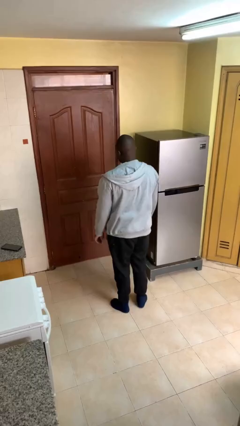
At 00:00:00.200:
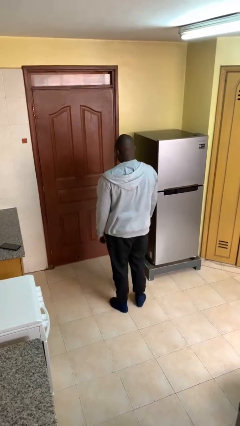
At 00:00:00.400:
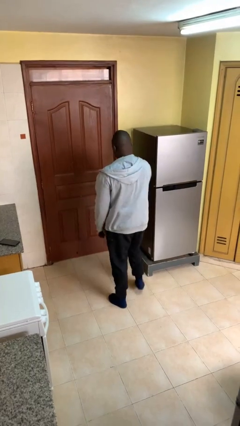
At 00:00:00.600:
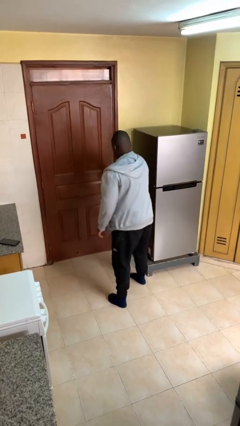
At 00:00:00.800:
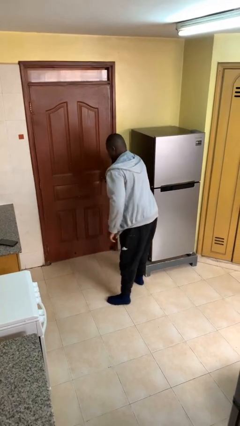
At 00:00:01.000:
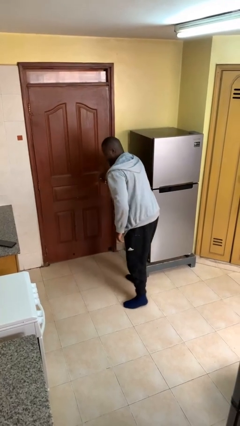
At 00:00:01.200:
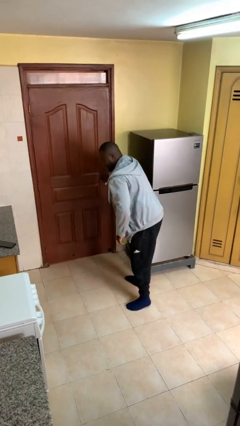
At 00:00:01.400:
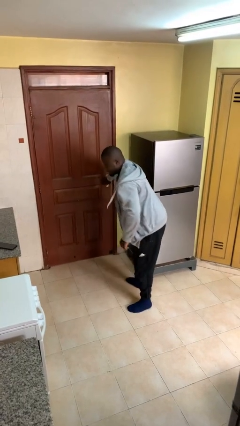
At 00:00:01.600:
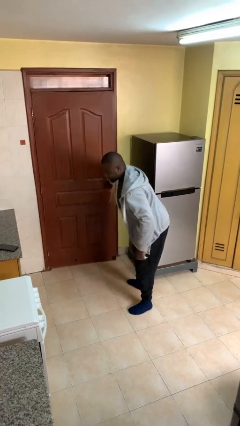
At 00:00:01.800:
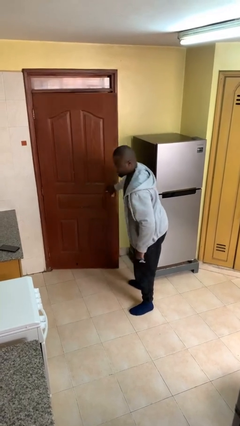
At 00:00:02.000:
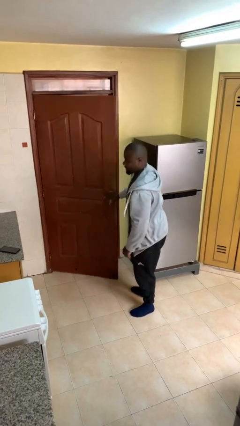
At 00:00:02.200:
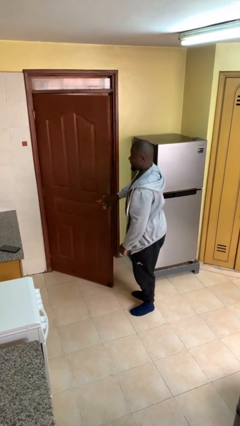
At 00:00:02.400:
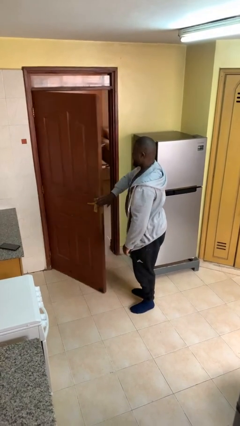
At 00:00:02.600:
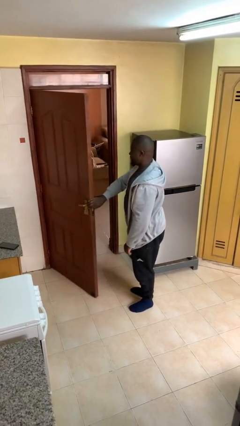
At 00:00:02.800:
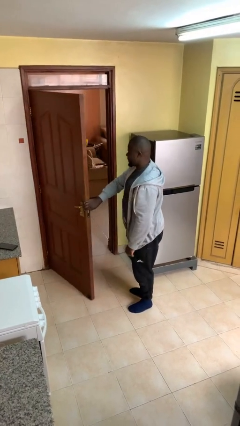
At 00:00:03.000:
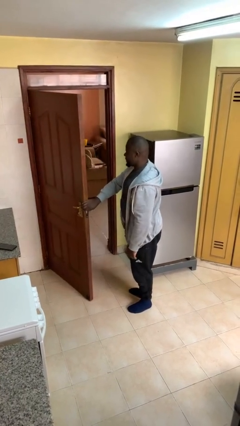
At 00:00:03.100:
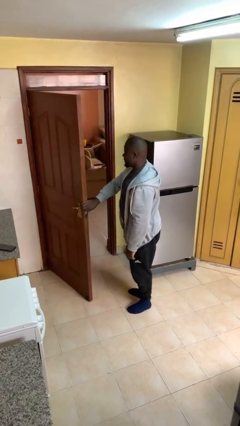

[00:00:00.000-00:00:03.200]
person opens facility door

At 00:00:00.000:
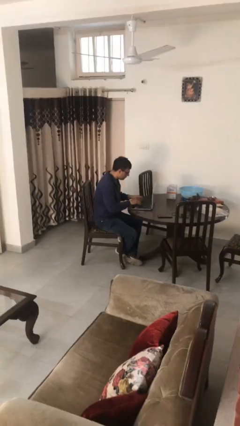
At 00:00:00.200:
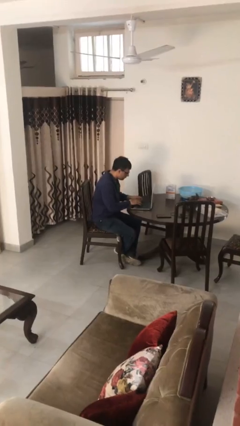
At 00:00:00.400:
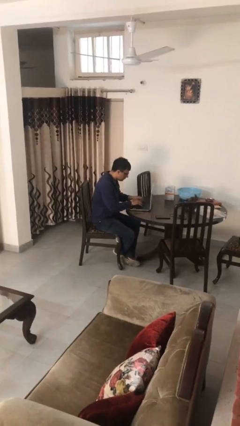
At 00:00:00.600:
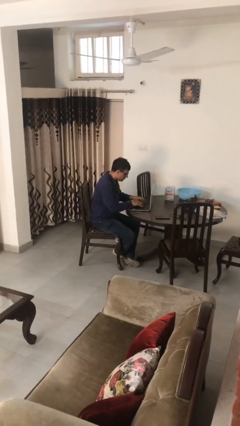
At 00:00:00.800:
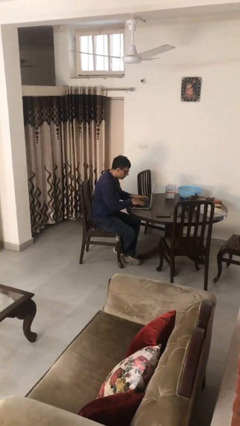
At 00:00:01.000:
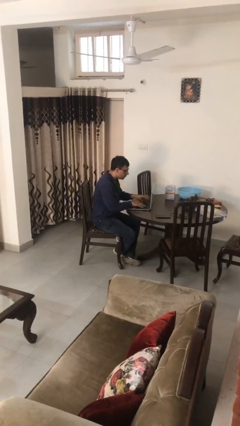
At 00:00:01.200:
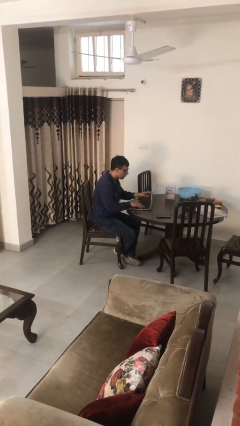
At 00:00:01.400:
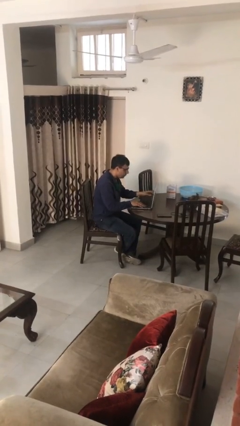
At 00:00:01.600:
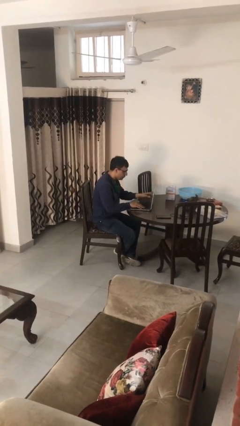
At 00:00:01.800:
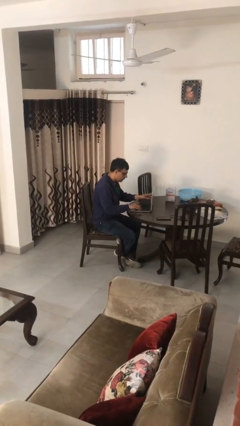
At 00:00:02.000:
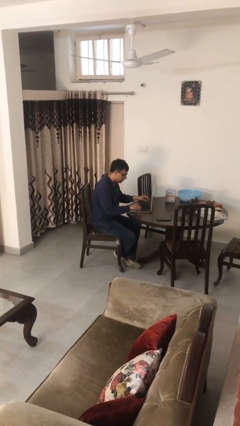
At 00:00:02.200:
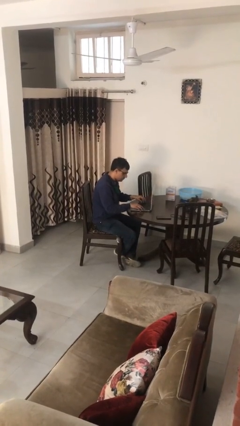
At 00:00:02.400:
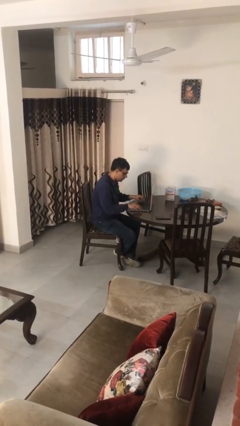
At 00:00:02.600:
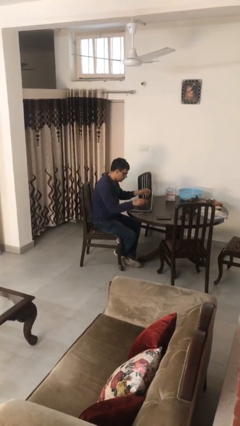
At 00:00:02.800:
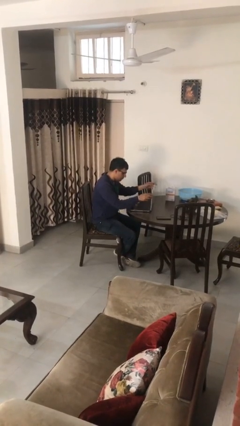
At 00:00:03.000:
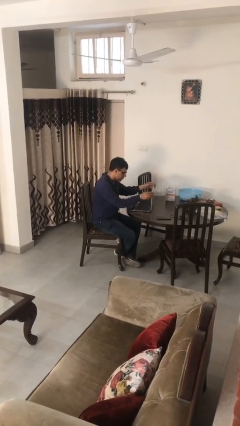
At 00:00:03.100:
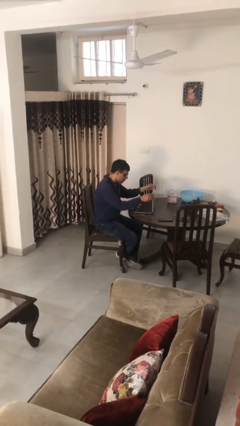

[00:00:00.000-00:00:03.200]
person interacts with laptop

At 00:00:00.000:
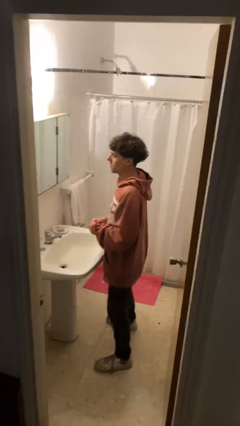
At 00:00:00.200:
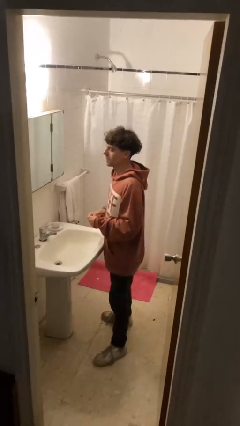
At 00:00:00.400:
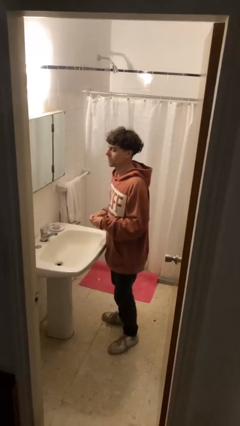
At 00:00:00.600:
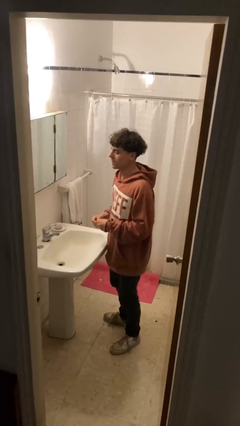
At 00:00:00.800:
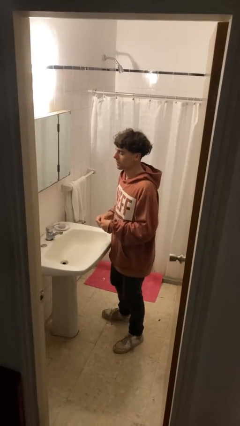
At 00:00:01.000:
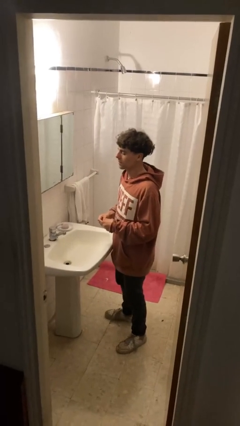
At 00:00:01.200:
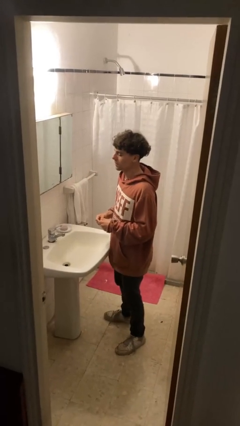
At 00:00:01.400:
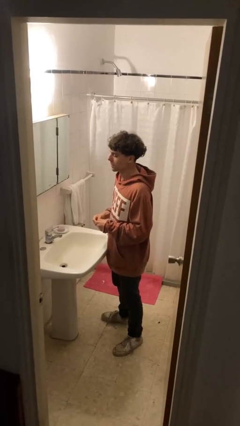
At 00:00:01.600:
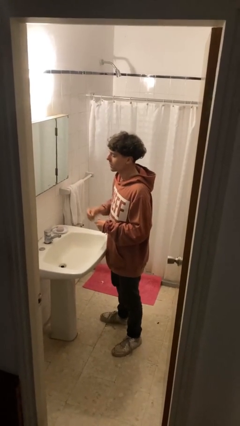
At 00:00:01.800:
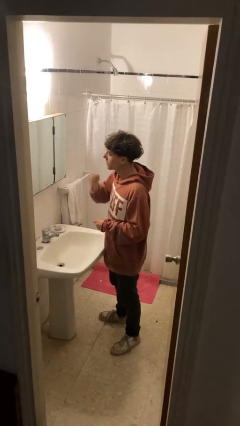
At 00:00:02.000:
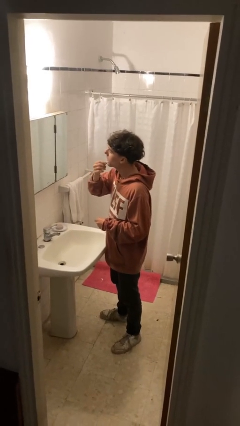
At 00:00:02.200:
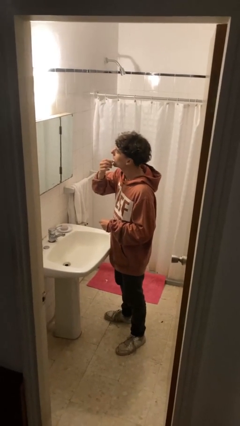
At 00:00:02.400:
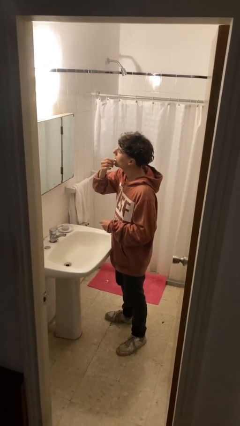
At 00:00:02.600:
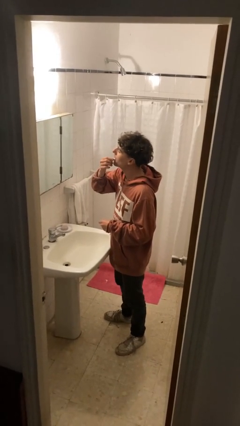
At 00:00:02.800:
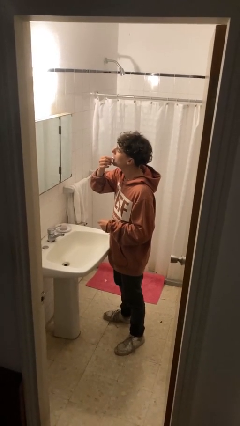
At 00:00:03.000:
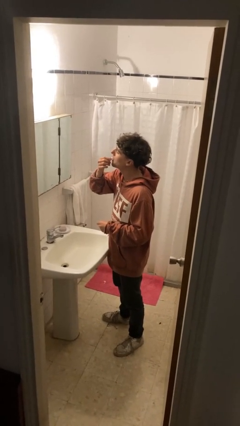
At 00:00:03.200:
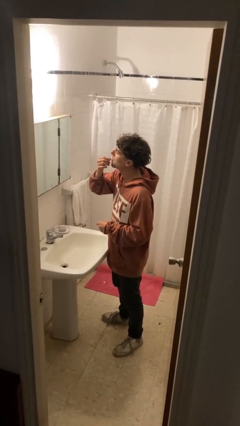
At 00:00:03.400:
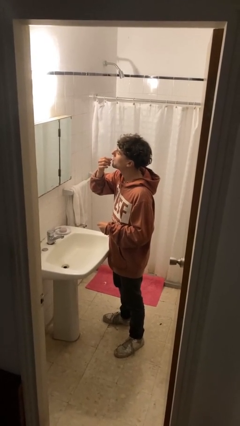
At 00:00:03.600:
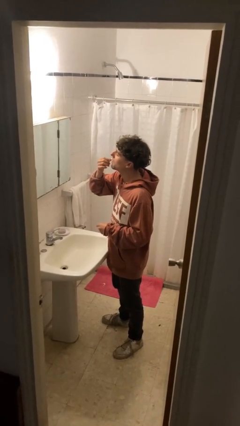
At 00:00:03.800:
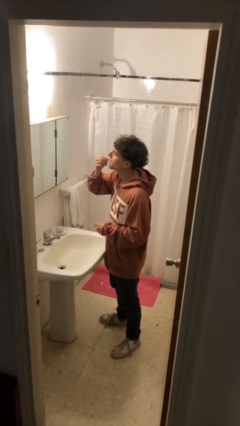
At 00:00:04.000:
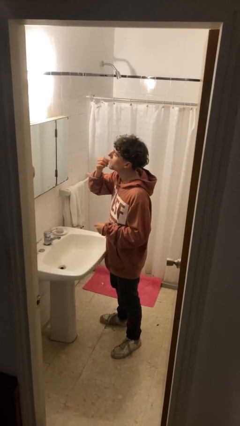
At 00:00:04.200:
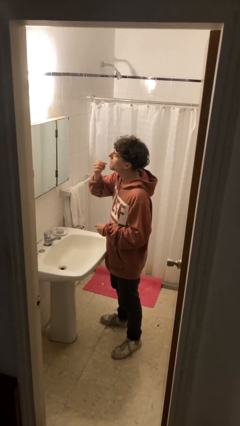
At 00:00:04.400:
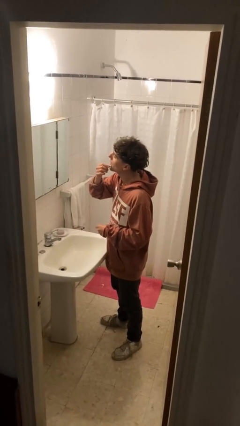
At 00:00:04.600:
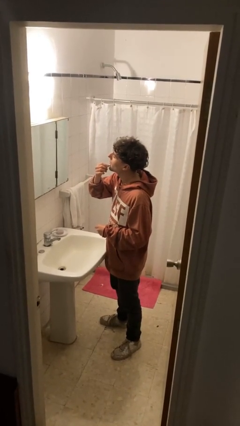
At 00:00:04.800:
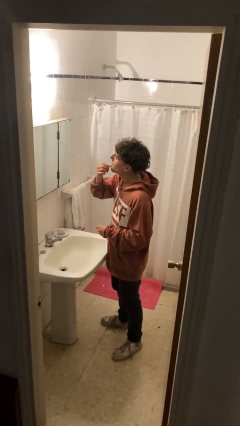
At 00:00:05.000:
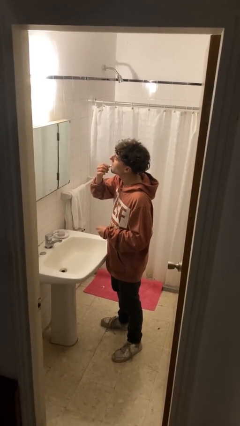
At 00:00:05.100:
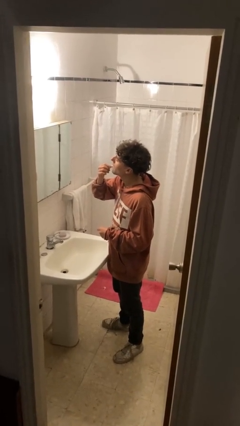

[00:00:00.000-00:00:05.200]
person applies lip makeup

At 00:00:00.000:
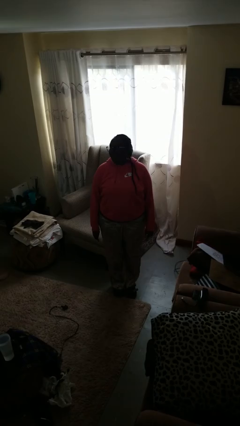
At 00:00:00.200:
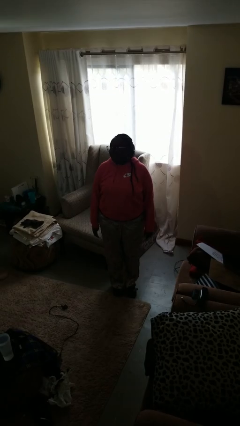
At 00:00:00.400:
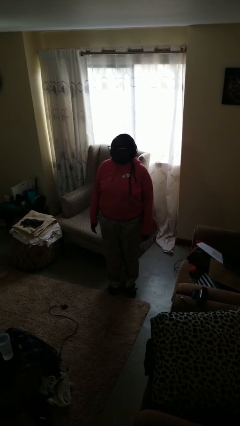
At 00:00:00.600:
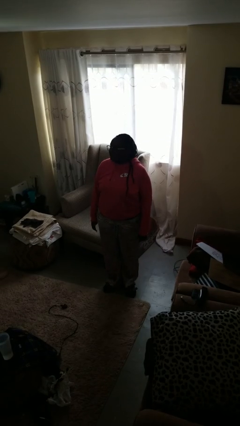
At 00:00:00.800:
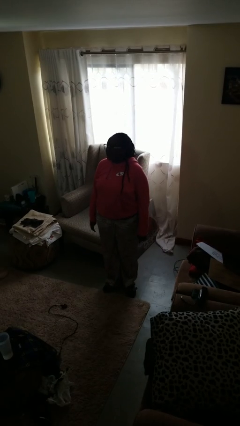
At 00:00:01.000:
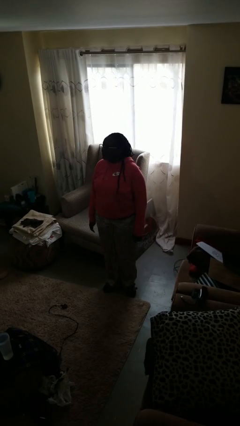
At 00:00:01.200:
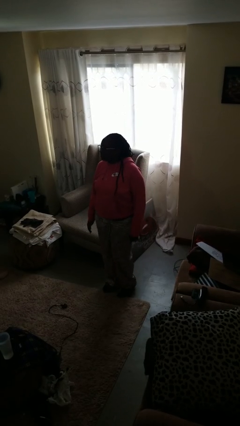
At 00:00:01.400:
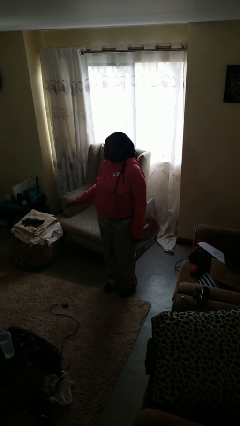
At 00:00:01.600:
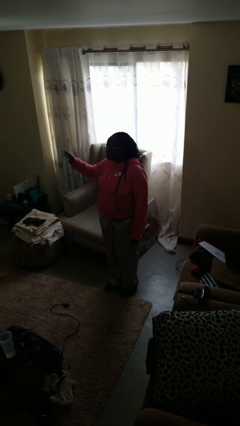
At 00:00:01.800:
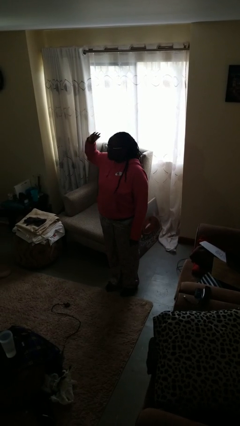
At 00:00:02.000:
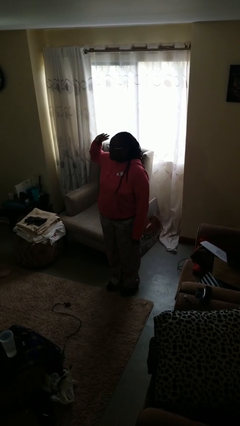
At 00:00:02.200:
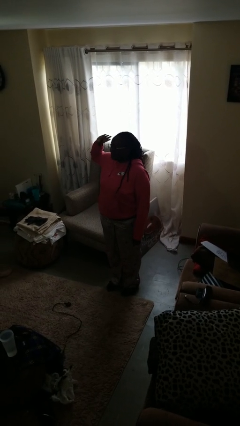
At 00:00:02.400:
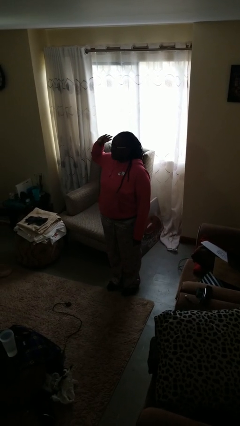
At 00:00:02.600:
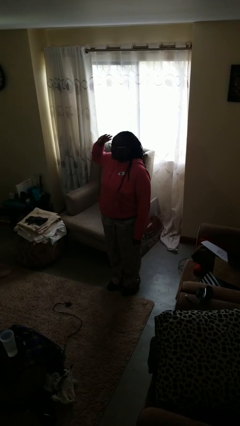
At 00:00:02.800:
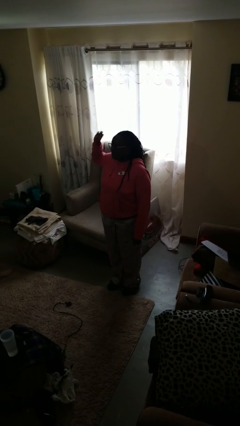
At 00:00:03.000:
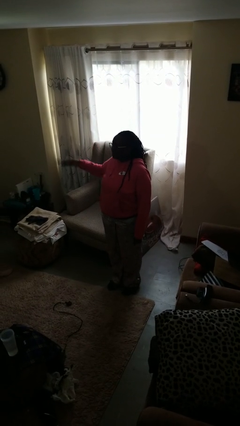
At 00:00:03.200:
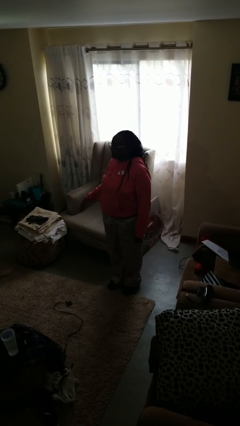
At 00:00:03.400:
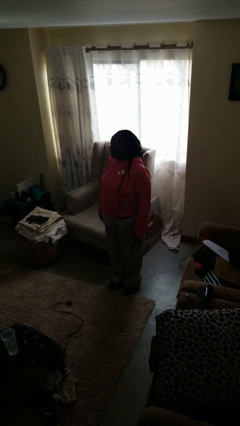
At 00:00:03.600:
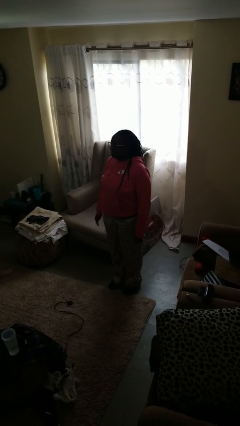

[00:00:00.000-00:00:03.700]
person salutes

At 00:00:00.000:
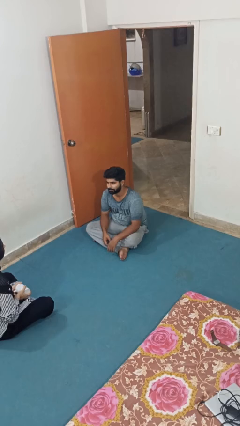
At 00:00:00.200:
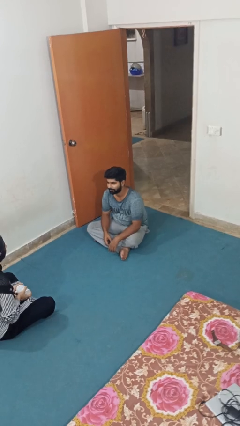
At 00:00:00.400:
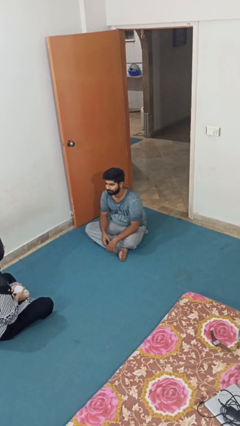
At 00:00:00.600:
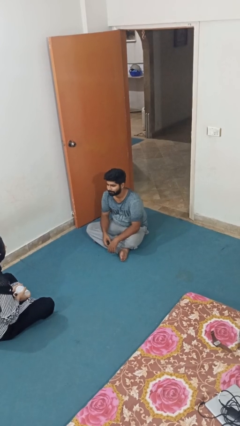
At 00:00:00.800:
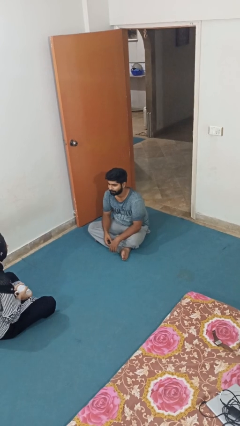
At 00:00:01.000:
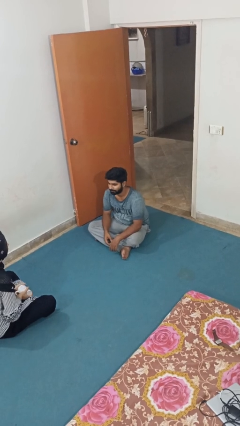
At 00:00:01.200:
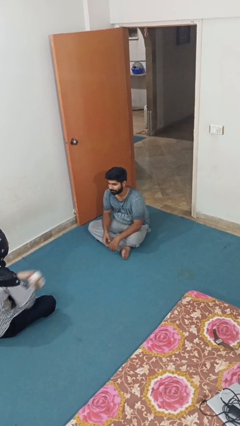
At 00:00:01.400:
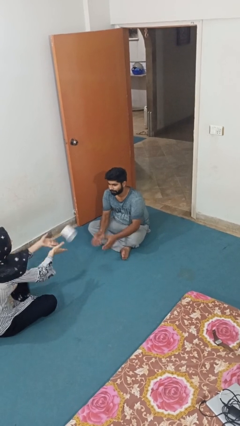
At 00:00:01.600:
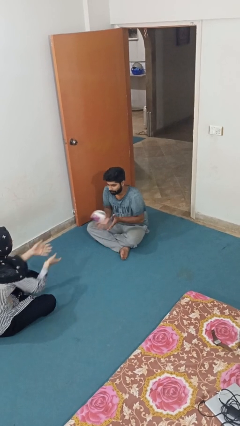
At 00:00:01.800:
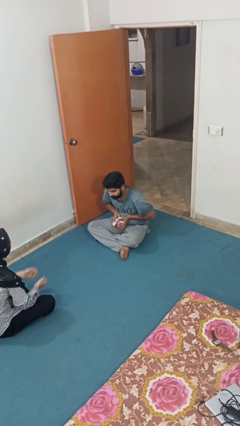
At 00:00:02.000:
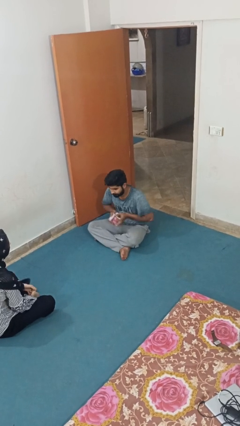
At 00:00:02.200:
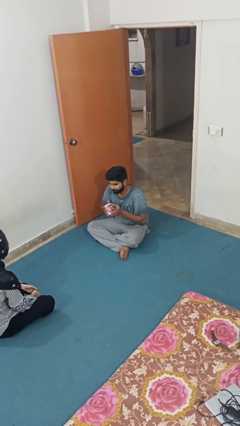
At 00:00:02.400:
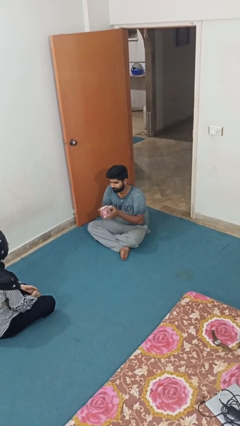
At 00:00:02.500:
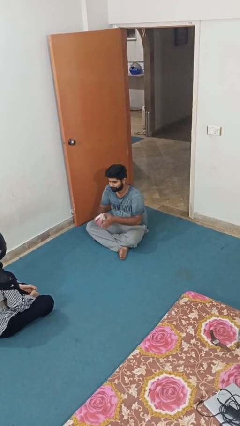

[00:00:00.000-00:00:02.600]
person catches object from person
